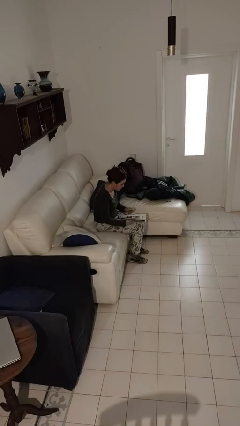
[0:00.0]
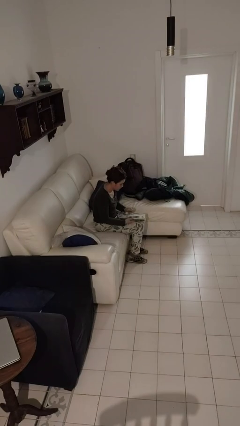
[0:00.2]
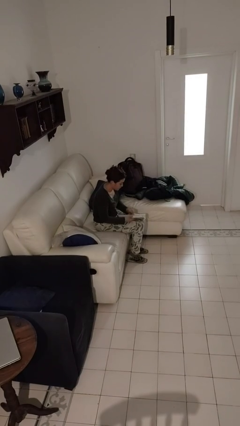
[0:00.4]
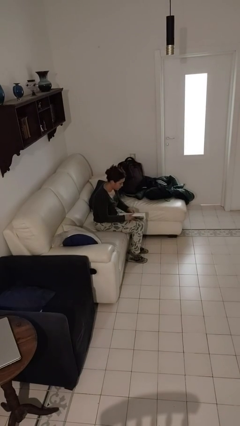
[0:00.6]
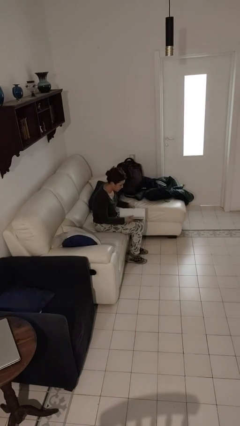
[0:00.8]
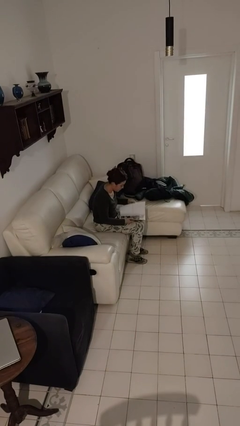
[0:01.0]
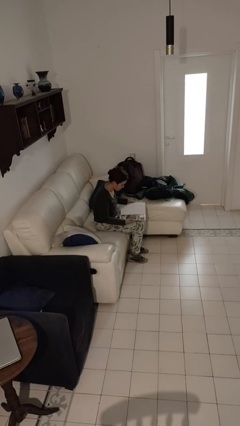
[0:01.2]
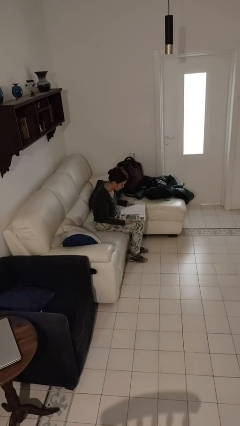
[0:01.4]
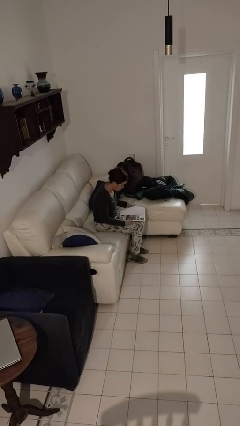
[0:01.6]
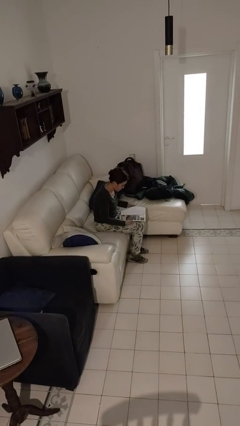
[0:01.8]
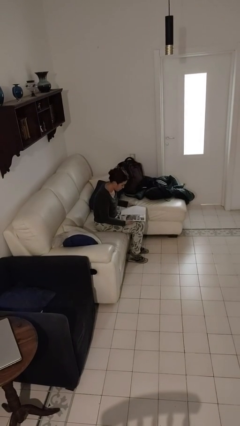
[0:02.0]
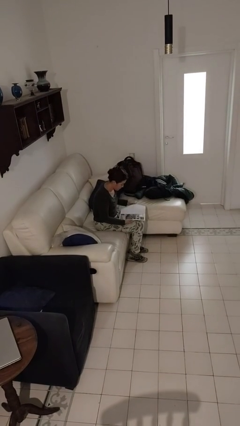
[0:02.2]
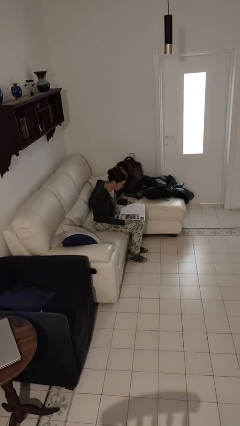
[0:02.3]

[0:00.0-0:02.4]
person reads magazine

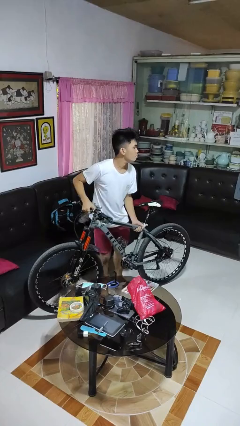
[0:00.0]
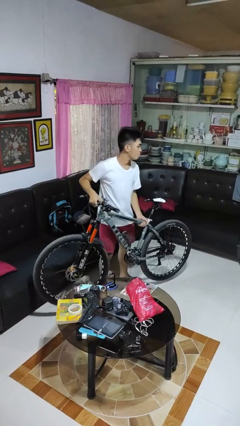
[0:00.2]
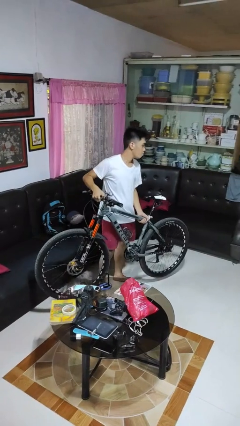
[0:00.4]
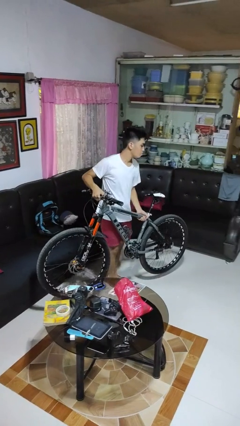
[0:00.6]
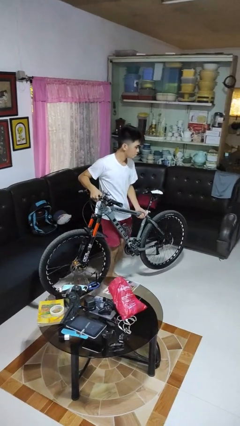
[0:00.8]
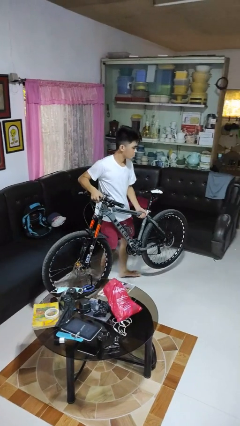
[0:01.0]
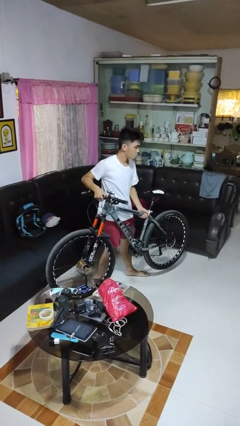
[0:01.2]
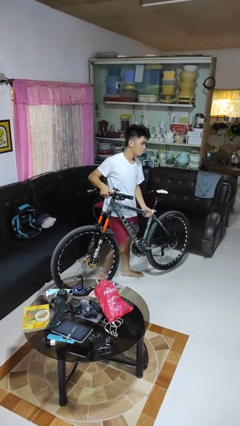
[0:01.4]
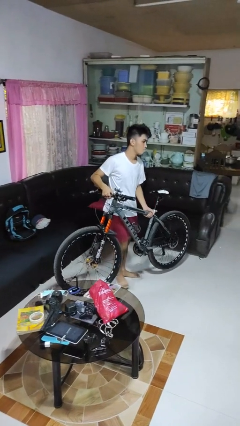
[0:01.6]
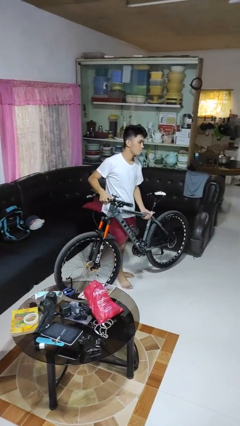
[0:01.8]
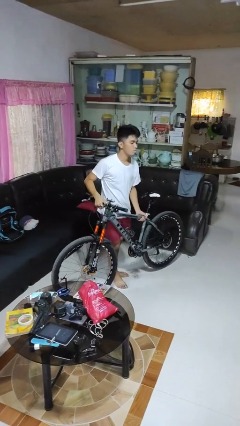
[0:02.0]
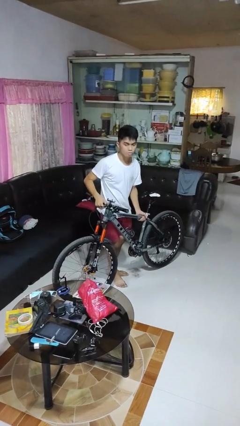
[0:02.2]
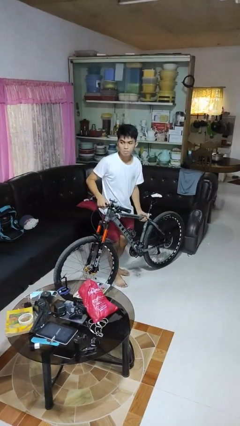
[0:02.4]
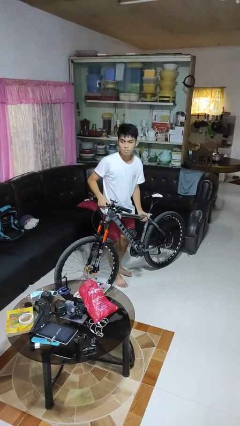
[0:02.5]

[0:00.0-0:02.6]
person carries bicycle

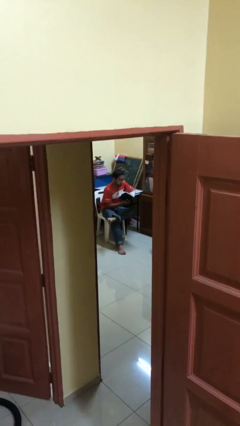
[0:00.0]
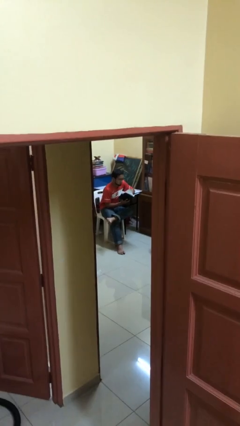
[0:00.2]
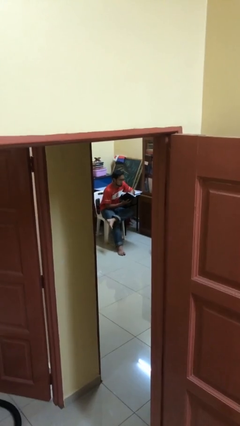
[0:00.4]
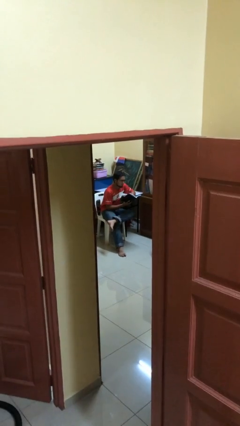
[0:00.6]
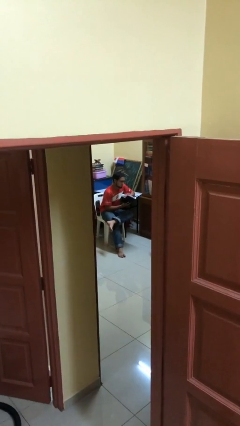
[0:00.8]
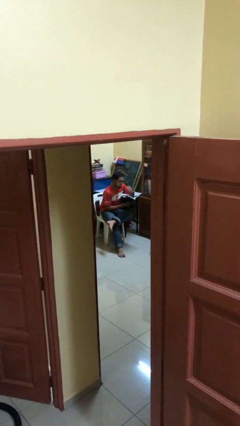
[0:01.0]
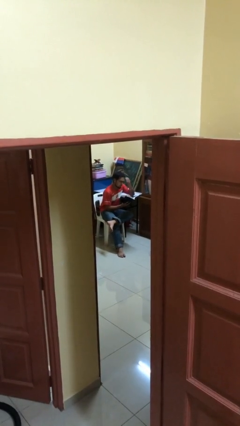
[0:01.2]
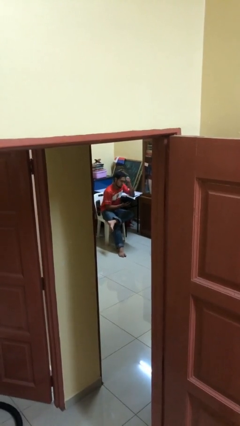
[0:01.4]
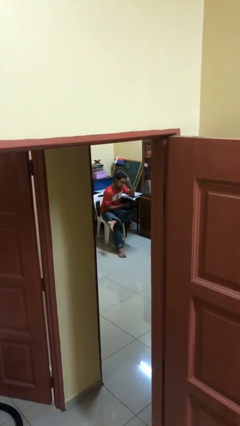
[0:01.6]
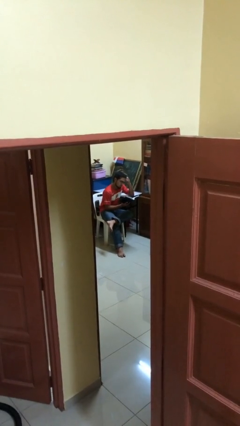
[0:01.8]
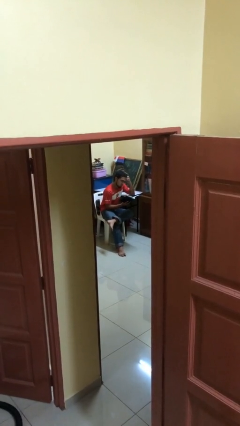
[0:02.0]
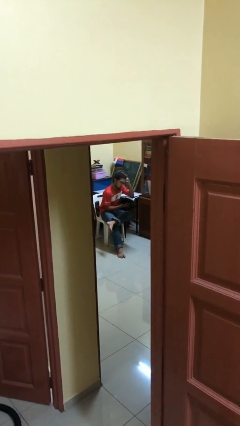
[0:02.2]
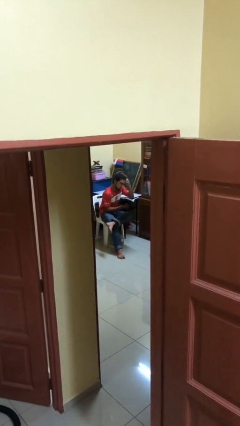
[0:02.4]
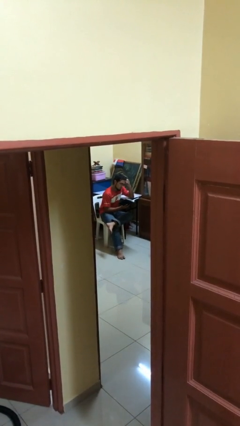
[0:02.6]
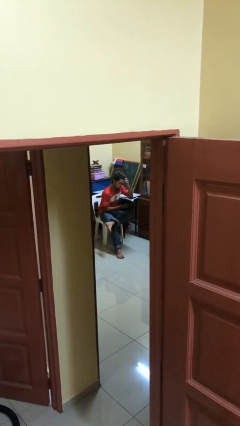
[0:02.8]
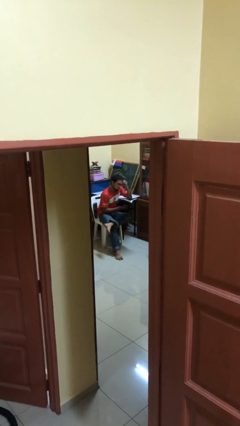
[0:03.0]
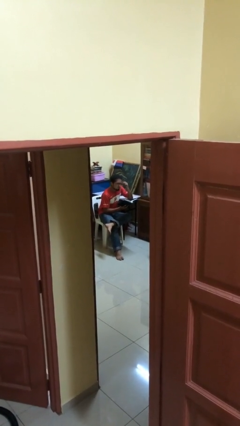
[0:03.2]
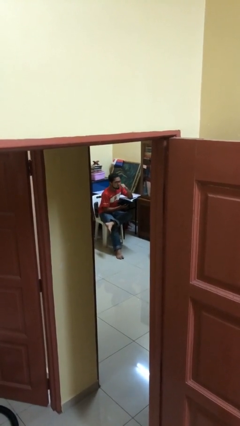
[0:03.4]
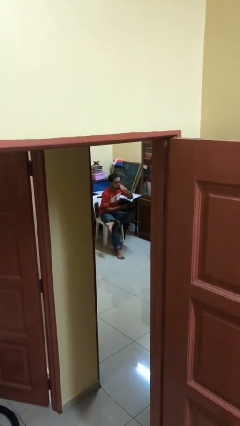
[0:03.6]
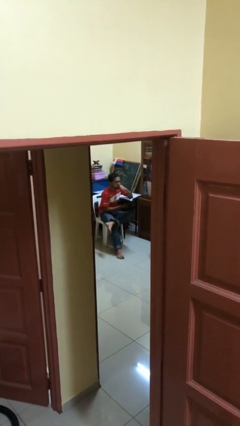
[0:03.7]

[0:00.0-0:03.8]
person reads document

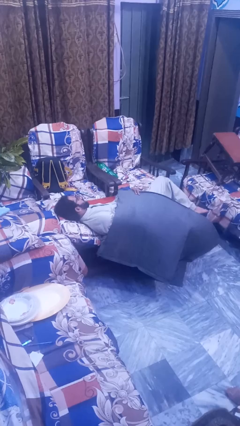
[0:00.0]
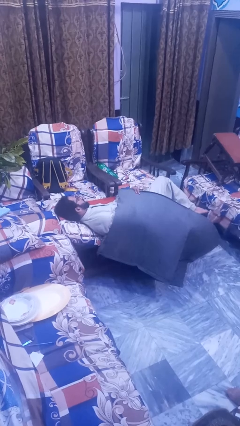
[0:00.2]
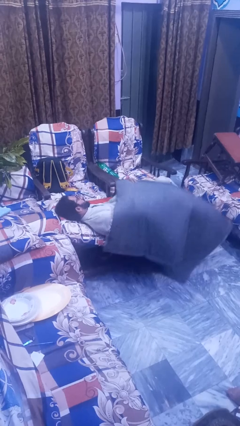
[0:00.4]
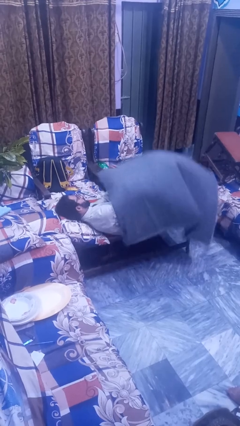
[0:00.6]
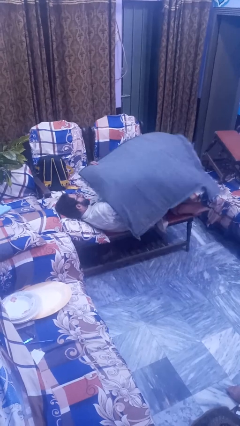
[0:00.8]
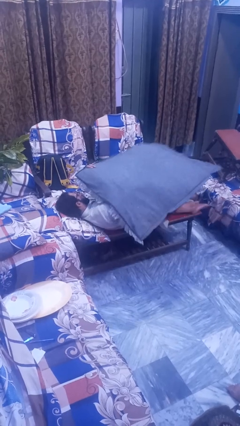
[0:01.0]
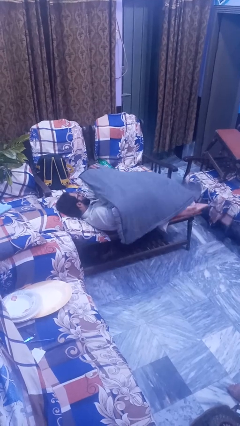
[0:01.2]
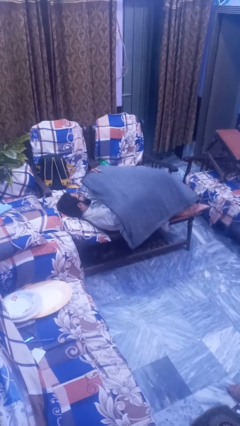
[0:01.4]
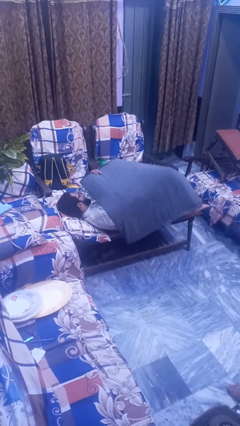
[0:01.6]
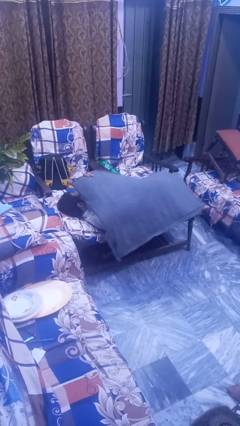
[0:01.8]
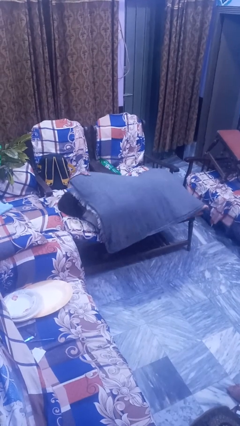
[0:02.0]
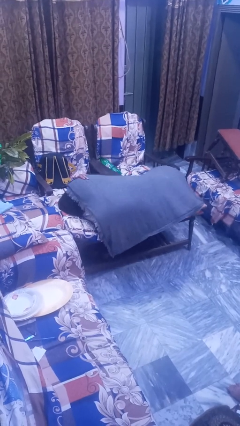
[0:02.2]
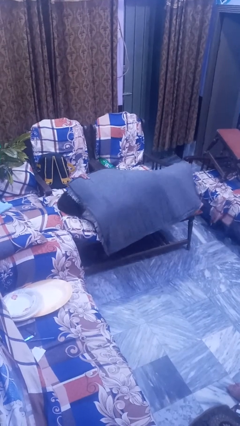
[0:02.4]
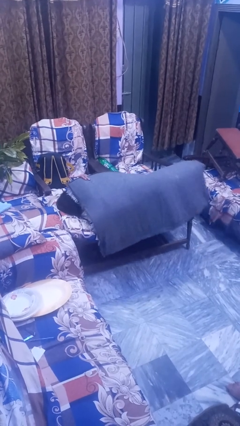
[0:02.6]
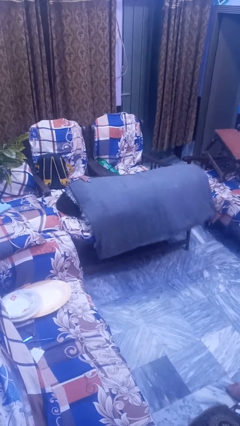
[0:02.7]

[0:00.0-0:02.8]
person covers with blanket

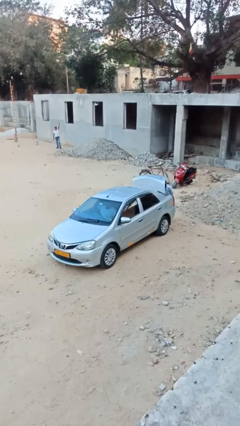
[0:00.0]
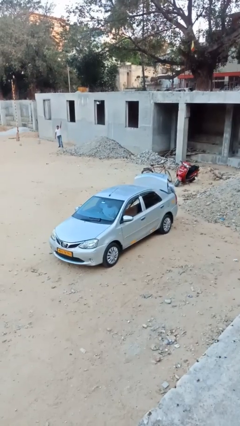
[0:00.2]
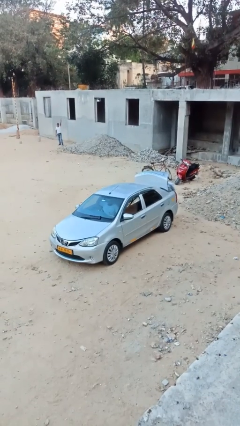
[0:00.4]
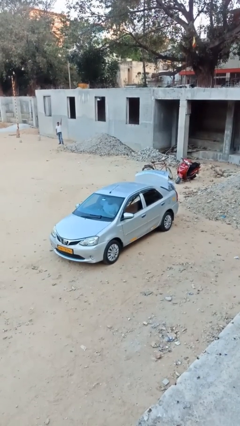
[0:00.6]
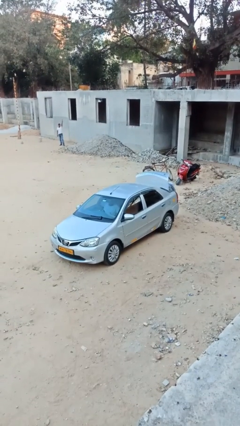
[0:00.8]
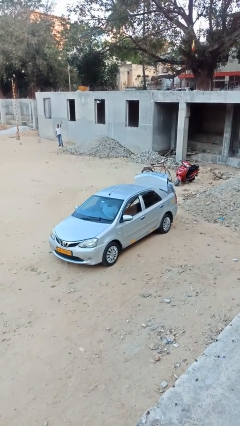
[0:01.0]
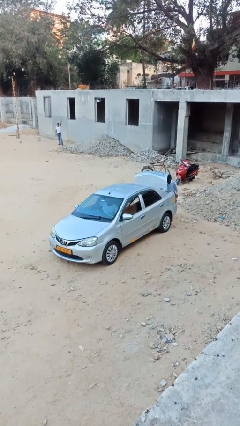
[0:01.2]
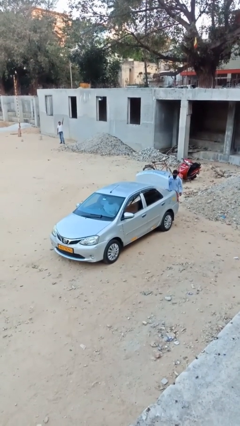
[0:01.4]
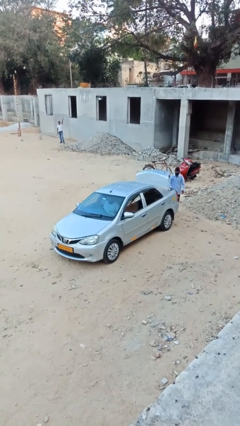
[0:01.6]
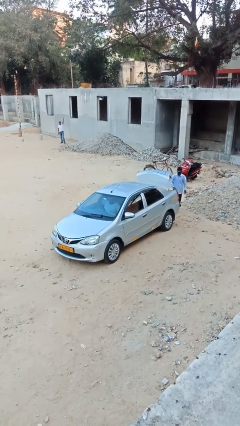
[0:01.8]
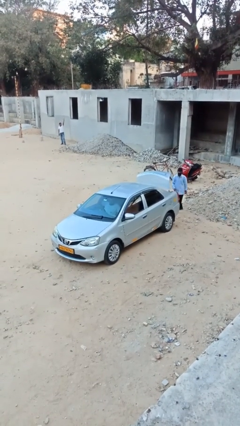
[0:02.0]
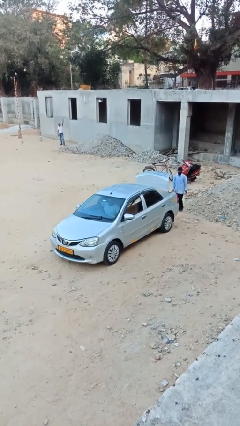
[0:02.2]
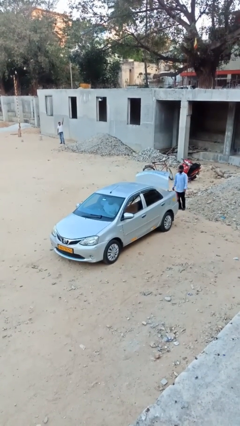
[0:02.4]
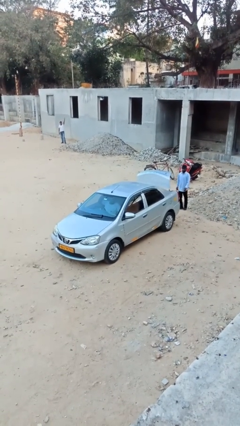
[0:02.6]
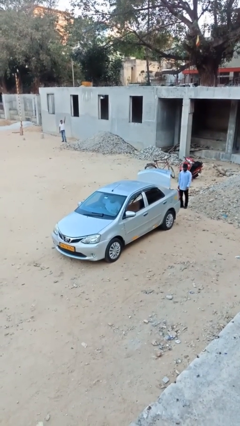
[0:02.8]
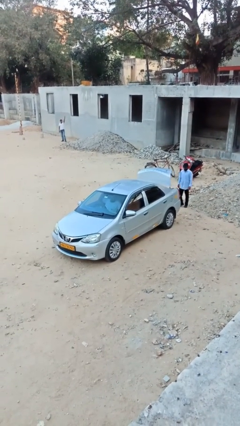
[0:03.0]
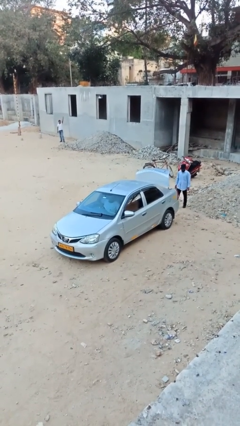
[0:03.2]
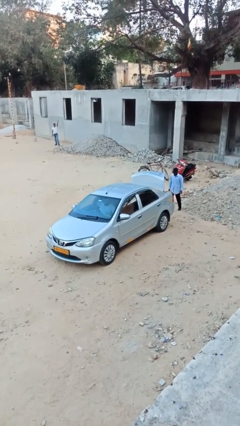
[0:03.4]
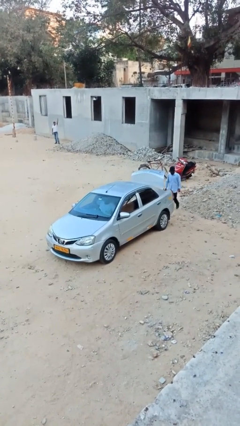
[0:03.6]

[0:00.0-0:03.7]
person loads car

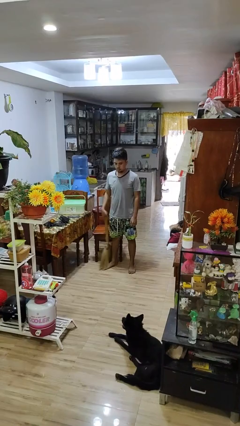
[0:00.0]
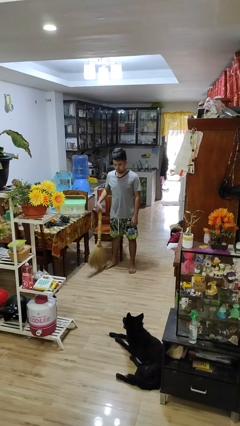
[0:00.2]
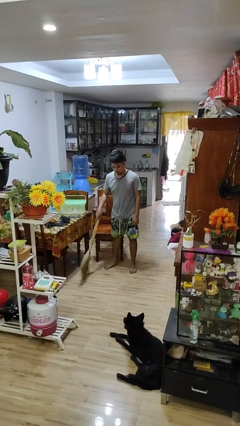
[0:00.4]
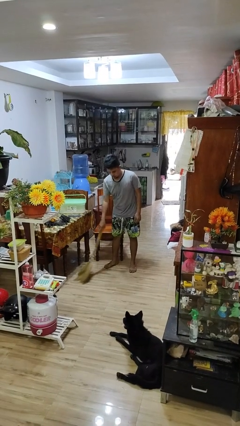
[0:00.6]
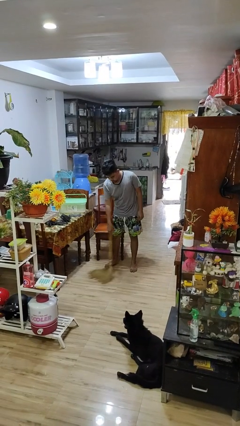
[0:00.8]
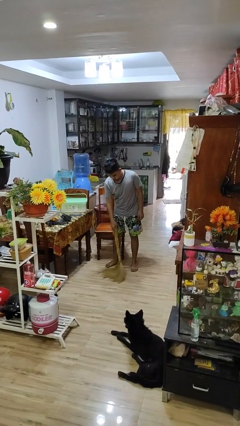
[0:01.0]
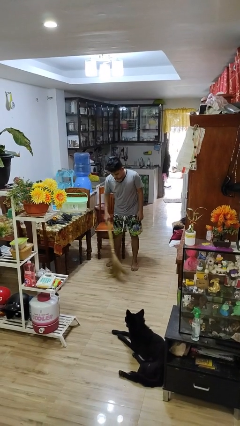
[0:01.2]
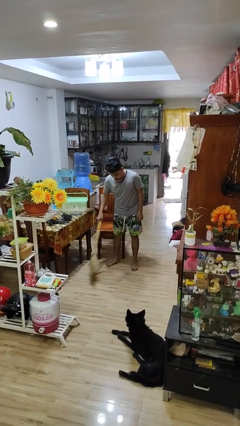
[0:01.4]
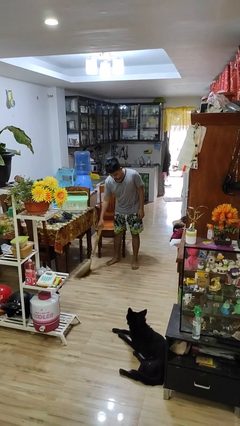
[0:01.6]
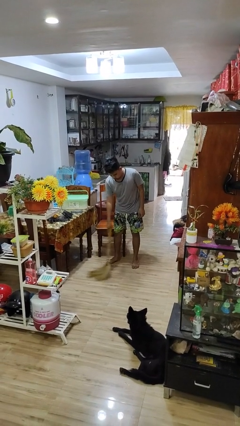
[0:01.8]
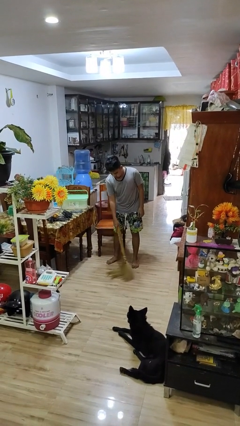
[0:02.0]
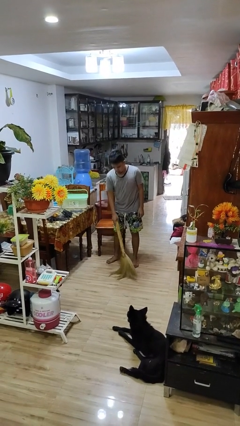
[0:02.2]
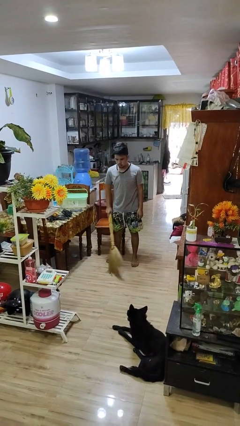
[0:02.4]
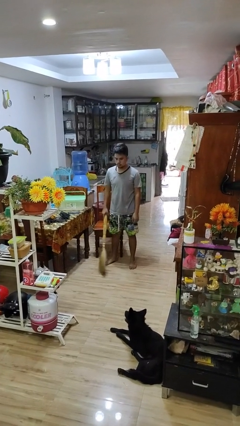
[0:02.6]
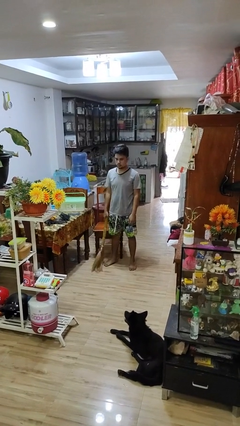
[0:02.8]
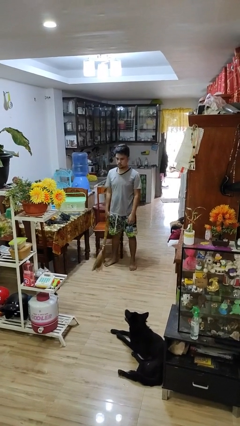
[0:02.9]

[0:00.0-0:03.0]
person sweeps floor
